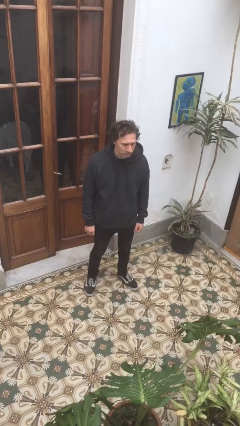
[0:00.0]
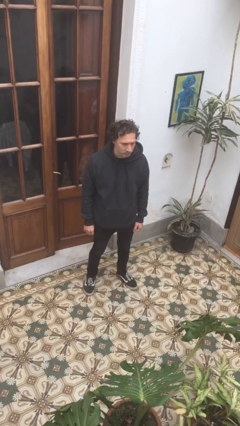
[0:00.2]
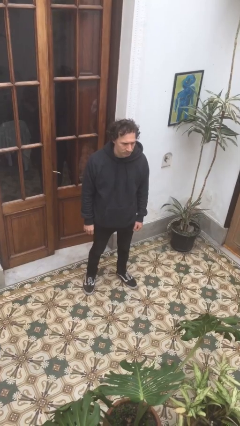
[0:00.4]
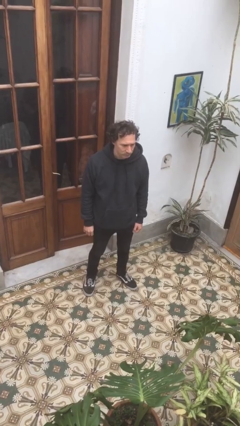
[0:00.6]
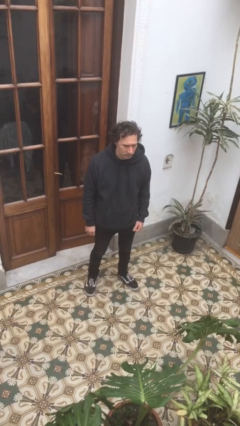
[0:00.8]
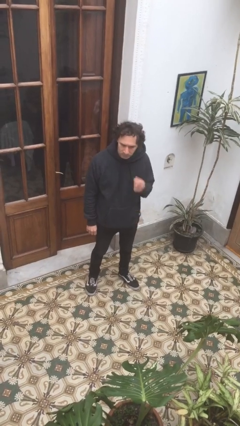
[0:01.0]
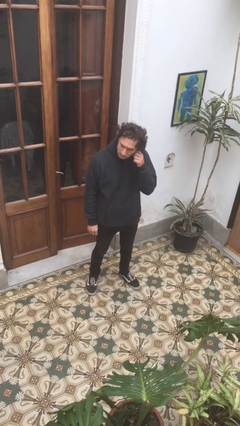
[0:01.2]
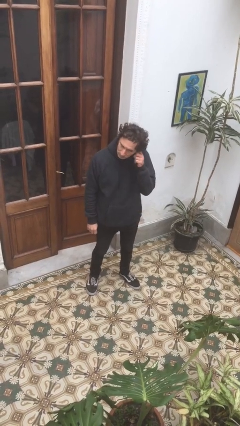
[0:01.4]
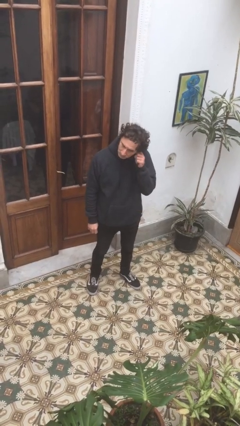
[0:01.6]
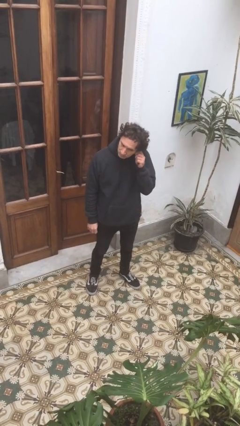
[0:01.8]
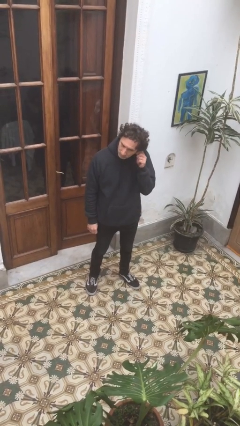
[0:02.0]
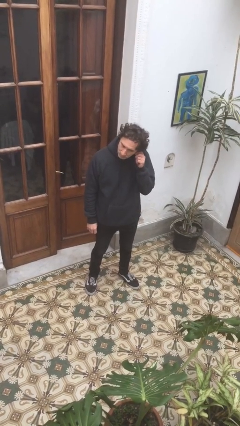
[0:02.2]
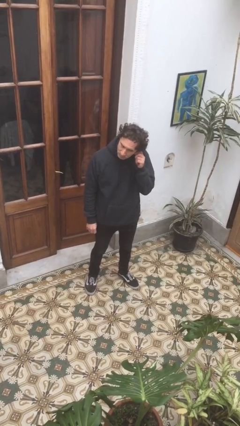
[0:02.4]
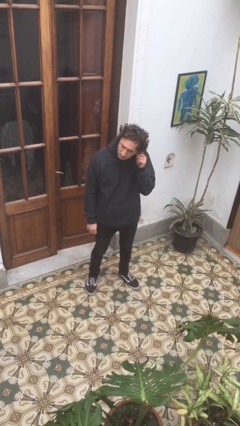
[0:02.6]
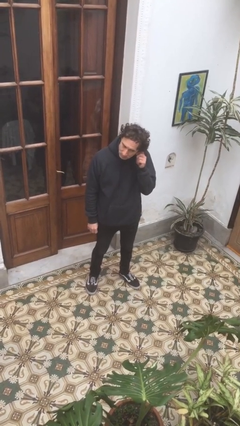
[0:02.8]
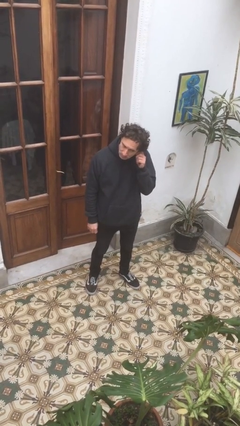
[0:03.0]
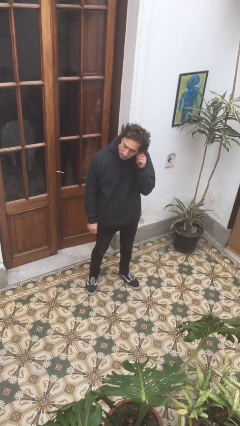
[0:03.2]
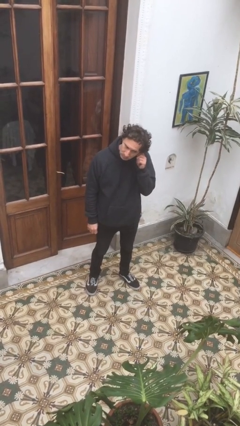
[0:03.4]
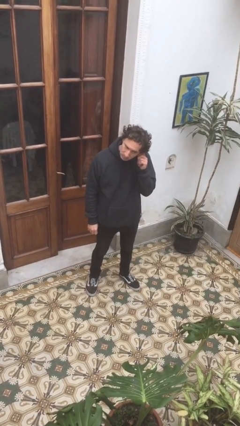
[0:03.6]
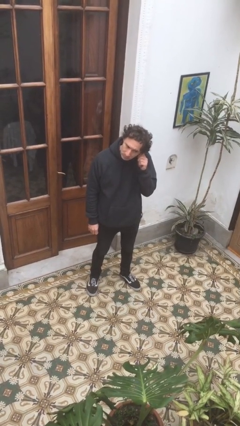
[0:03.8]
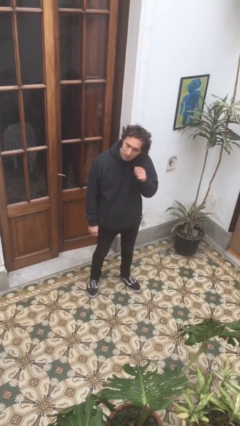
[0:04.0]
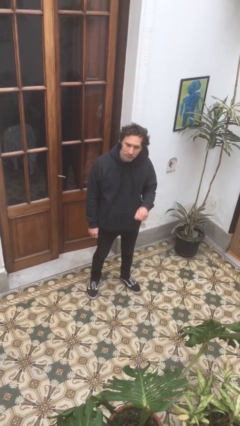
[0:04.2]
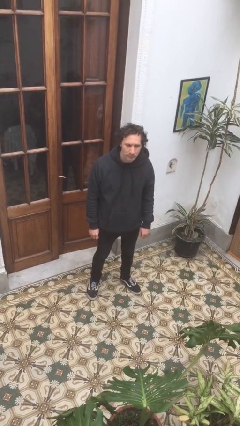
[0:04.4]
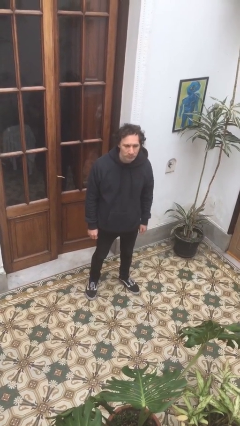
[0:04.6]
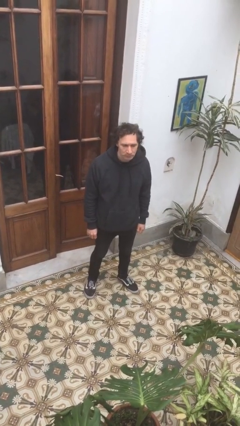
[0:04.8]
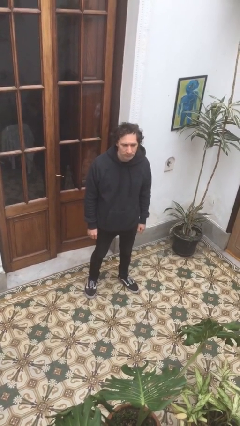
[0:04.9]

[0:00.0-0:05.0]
person touches earlobe

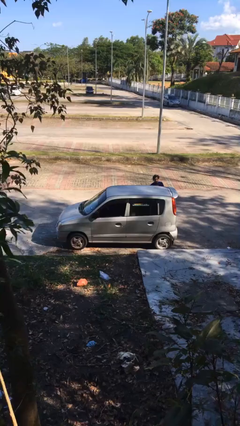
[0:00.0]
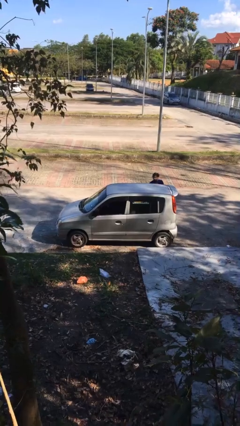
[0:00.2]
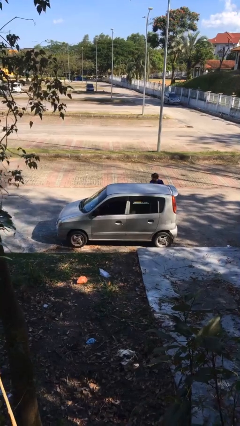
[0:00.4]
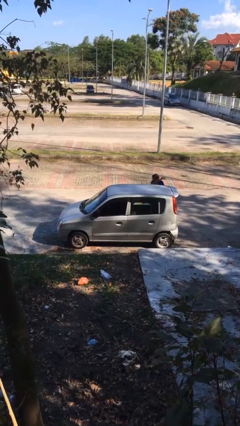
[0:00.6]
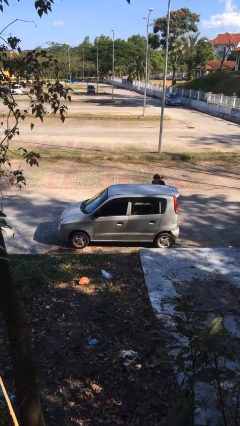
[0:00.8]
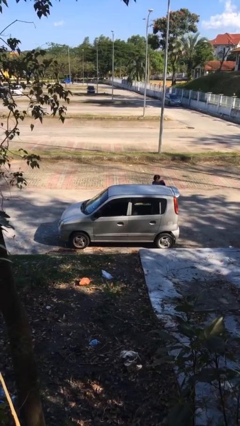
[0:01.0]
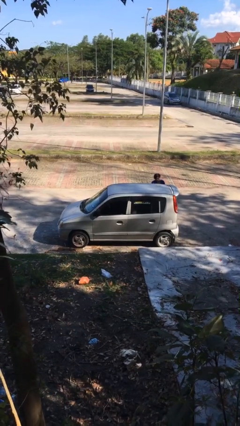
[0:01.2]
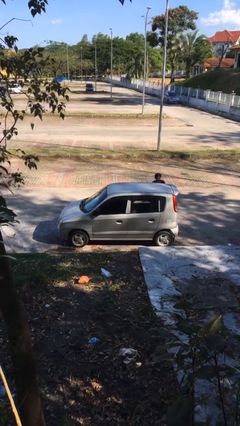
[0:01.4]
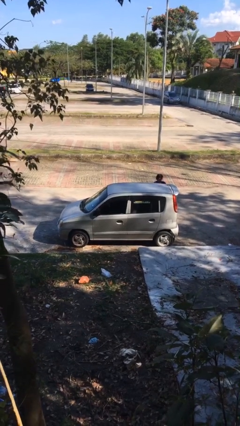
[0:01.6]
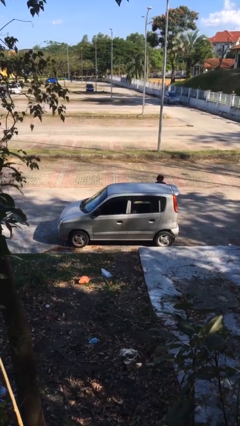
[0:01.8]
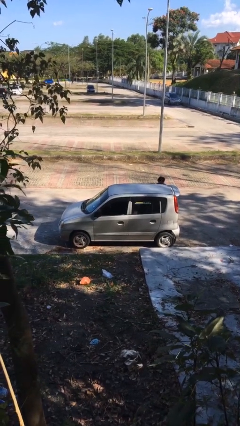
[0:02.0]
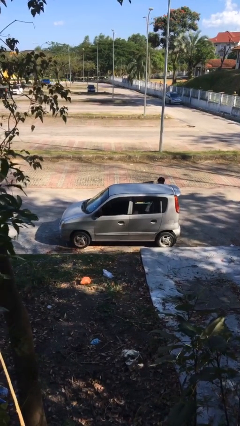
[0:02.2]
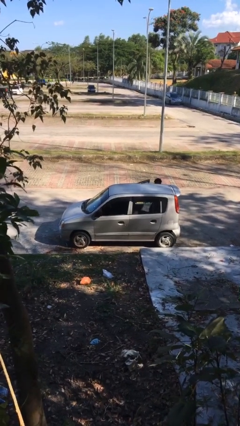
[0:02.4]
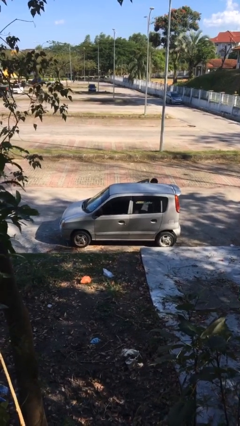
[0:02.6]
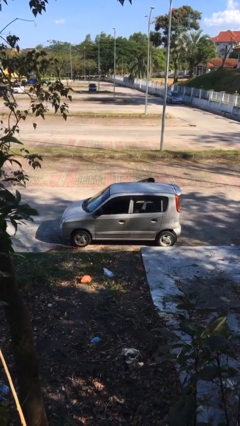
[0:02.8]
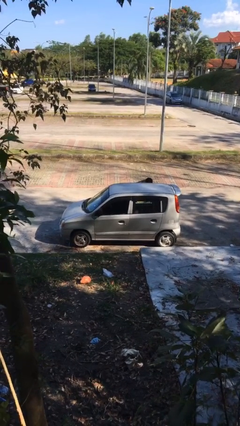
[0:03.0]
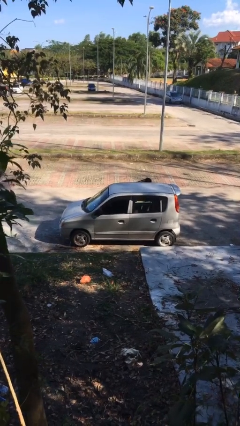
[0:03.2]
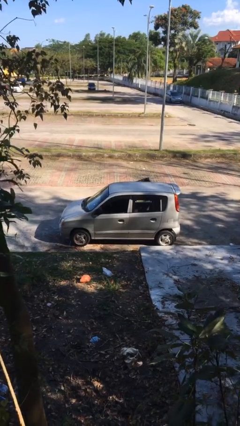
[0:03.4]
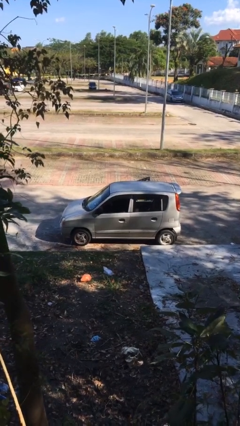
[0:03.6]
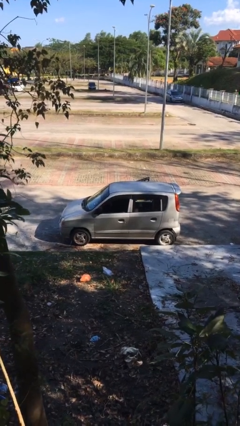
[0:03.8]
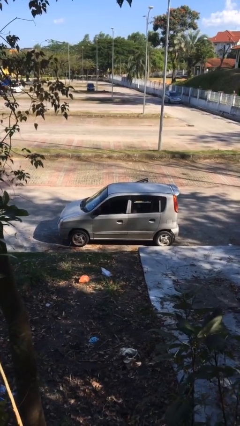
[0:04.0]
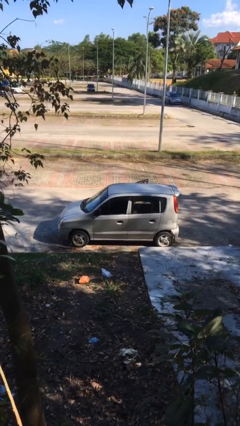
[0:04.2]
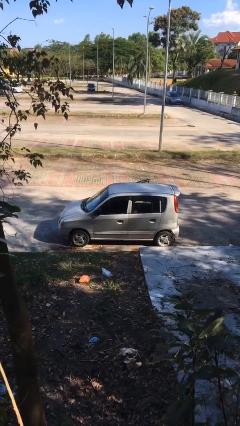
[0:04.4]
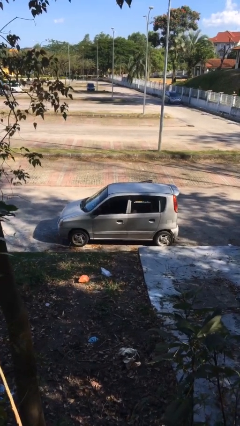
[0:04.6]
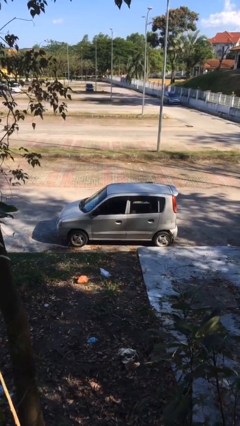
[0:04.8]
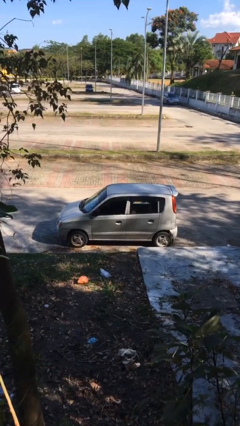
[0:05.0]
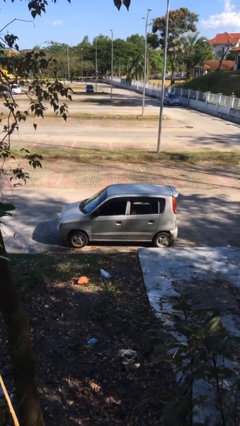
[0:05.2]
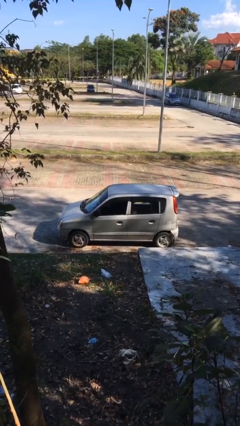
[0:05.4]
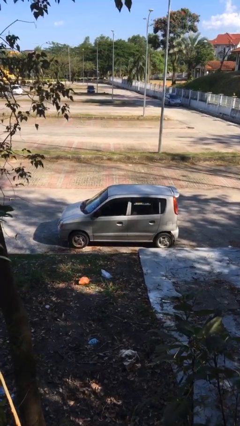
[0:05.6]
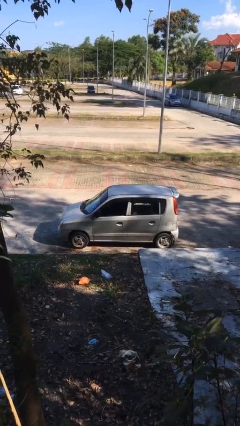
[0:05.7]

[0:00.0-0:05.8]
car picks up person

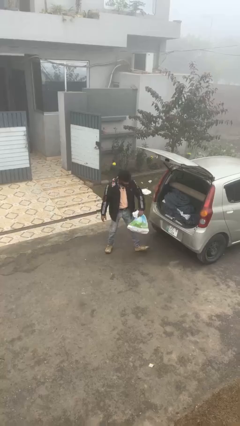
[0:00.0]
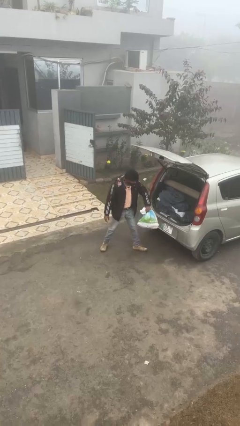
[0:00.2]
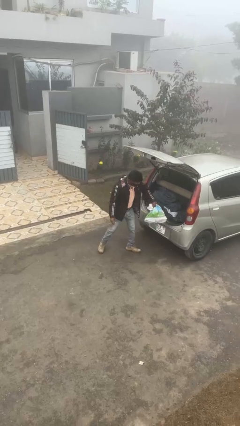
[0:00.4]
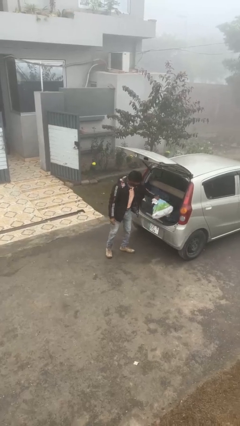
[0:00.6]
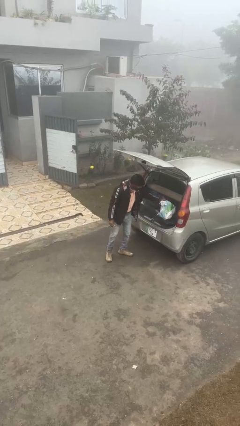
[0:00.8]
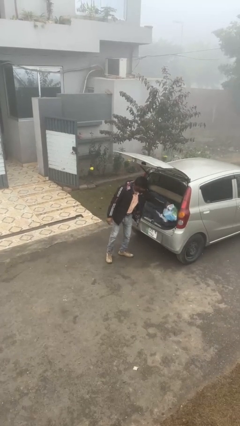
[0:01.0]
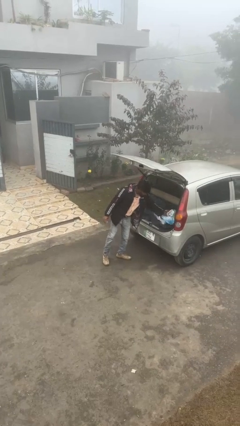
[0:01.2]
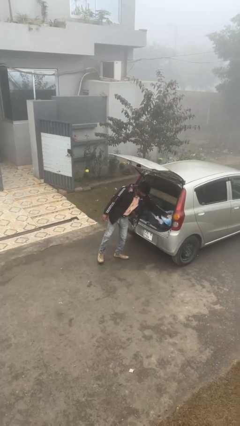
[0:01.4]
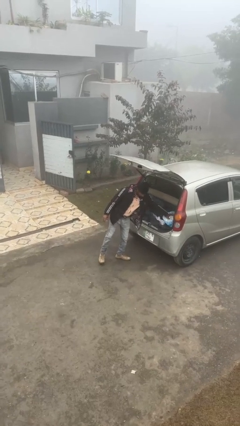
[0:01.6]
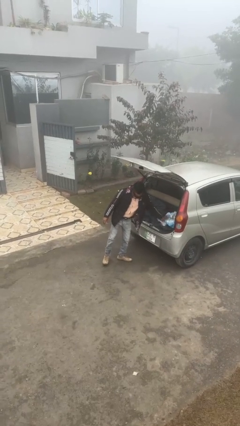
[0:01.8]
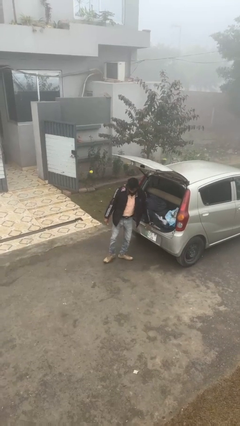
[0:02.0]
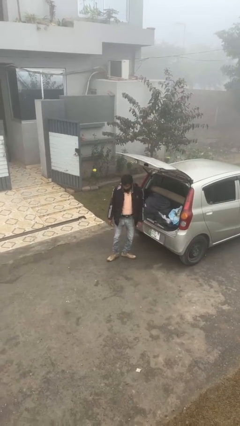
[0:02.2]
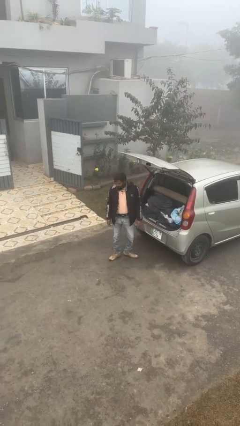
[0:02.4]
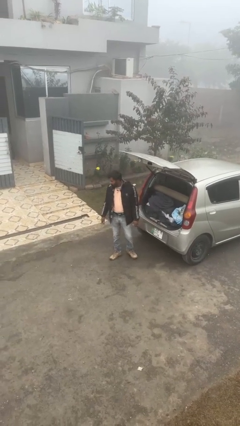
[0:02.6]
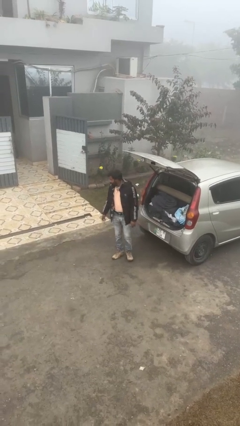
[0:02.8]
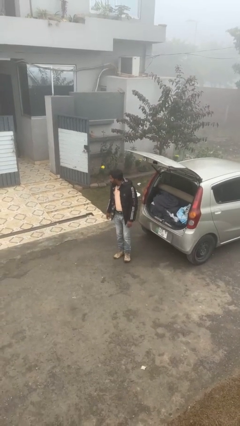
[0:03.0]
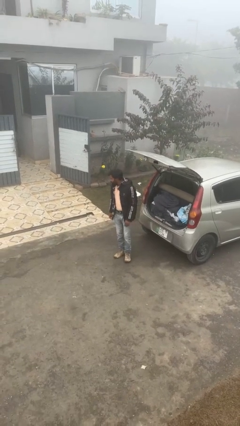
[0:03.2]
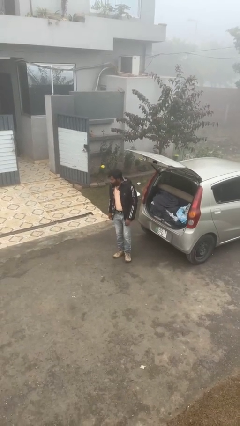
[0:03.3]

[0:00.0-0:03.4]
person loads car

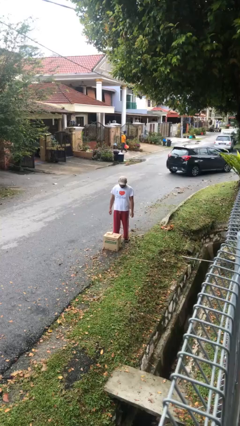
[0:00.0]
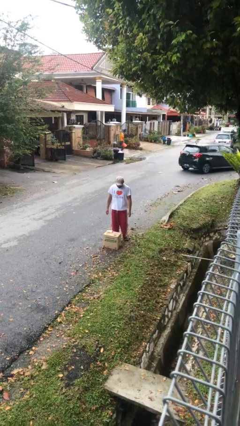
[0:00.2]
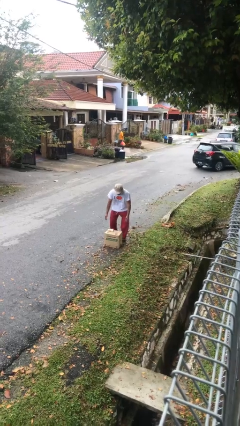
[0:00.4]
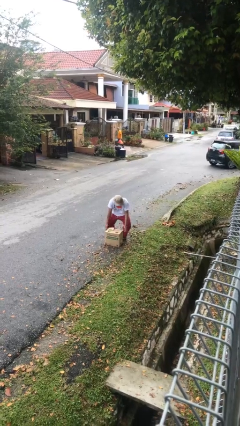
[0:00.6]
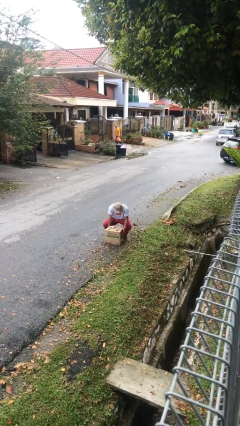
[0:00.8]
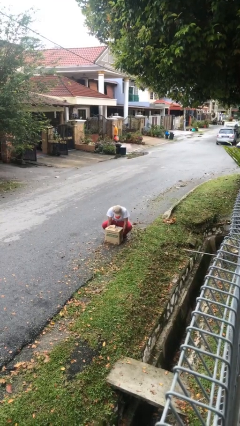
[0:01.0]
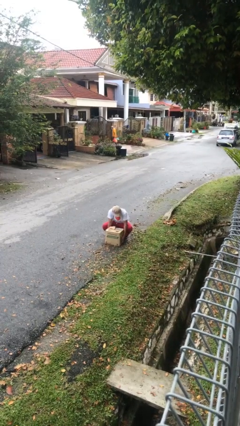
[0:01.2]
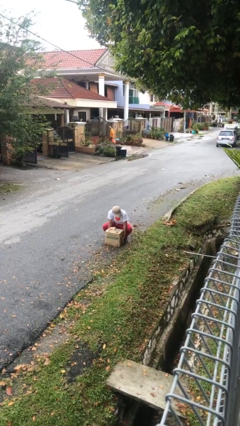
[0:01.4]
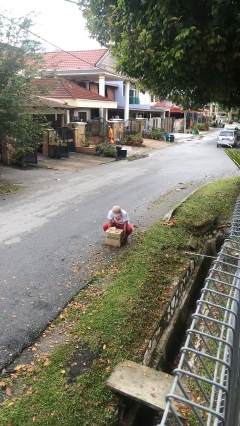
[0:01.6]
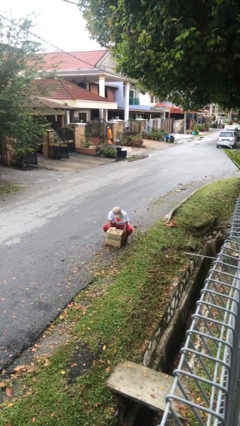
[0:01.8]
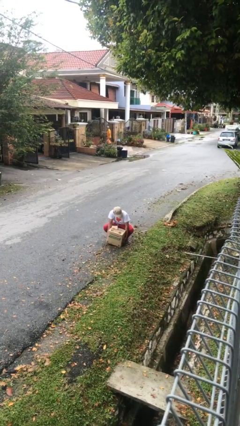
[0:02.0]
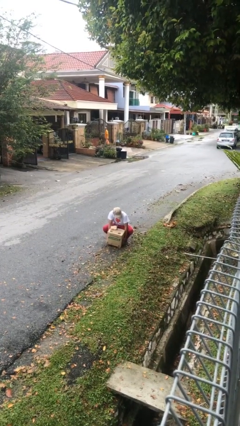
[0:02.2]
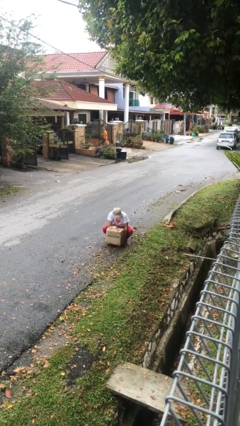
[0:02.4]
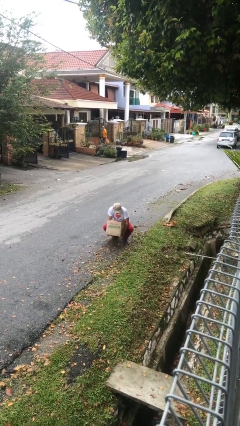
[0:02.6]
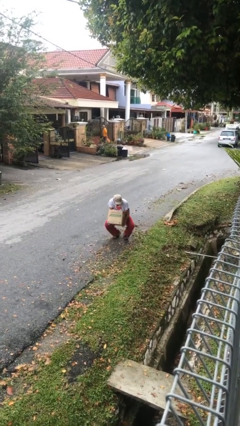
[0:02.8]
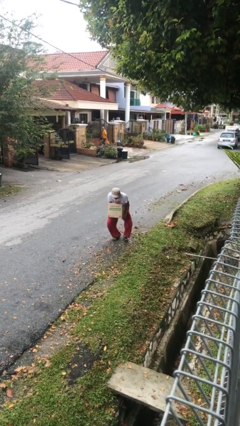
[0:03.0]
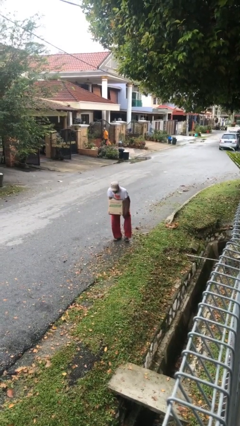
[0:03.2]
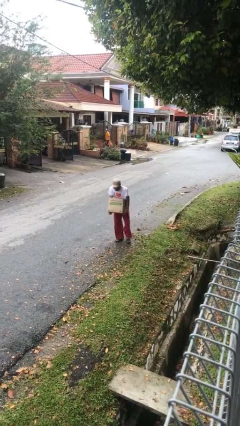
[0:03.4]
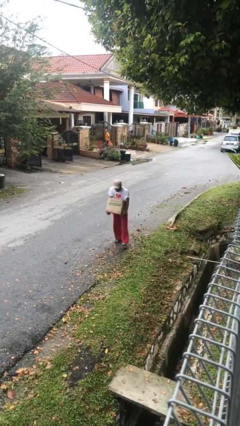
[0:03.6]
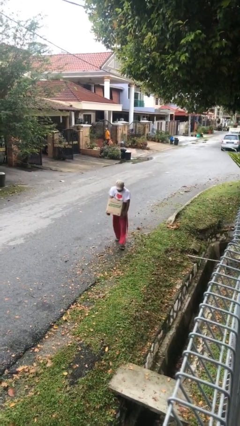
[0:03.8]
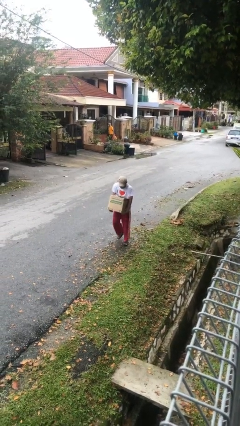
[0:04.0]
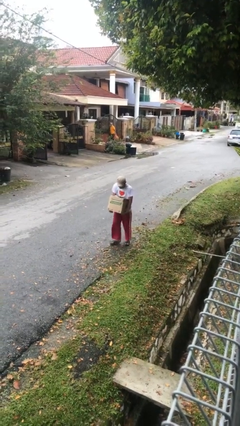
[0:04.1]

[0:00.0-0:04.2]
person picks up object from floor
